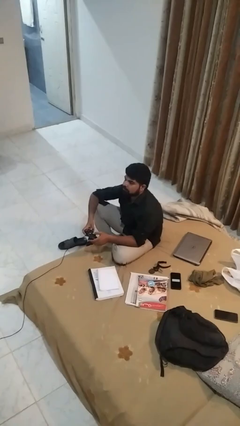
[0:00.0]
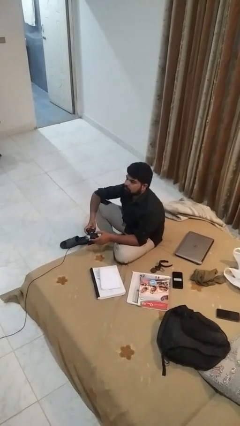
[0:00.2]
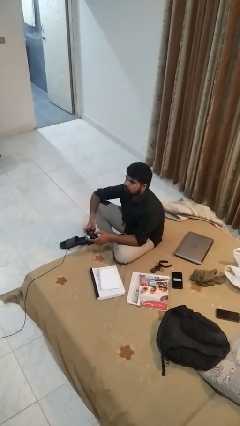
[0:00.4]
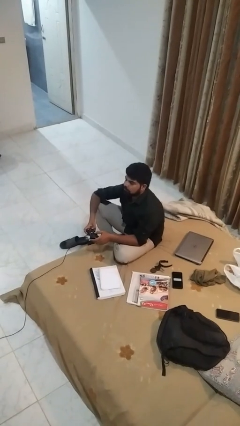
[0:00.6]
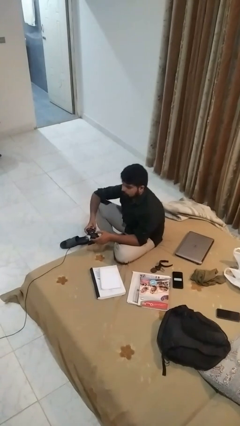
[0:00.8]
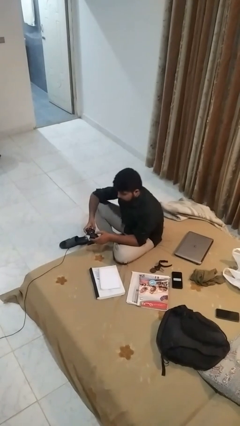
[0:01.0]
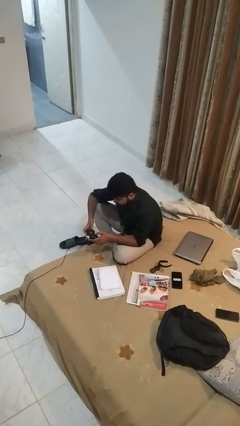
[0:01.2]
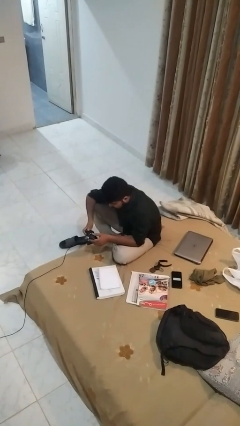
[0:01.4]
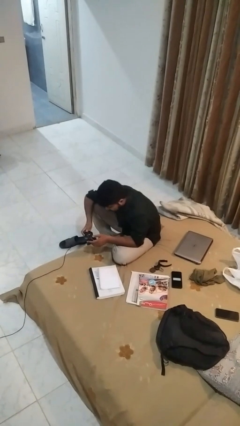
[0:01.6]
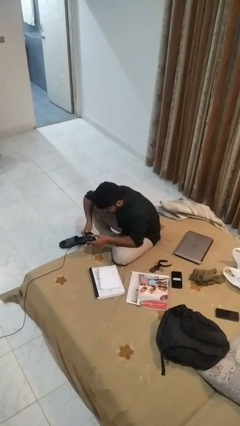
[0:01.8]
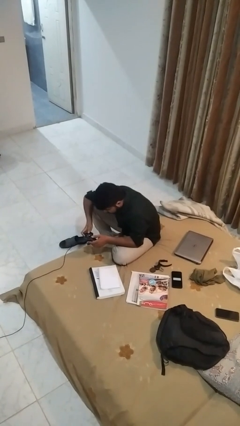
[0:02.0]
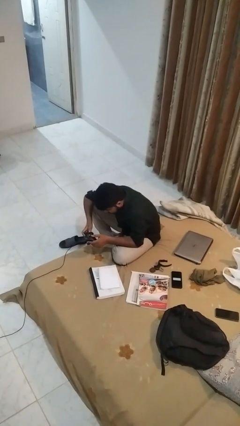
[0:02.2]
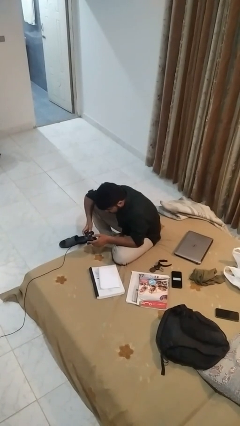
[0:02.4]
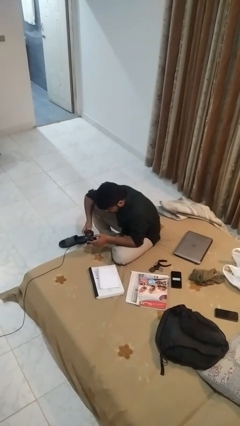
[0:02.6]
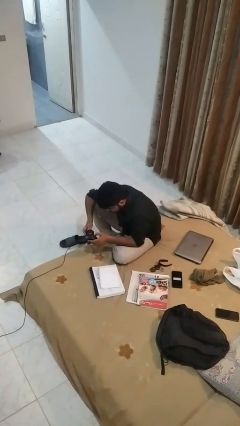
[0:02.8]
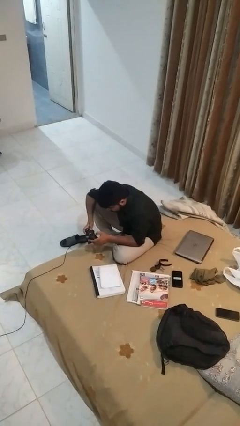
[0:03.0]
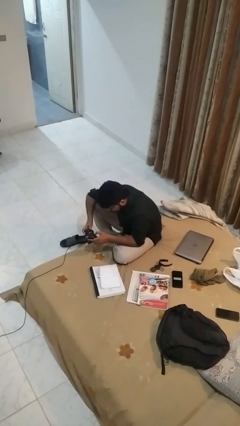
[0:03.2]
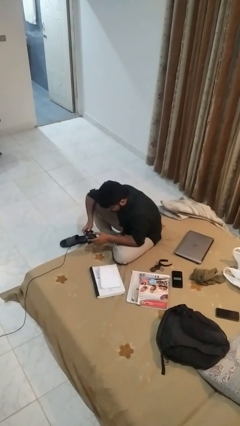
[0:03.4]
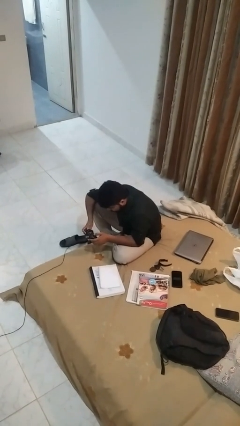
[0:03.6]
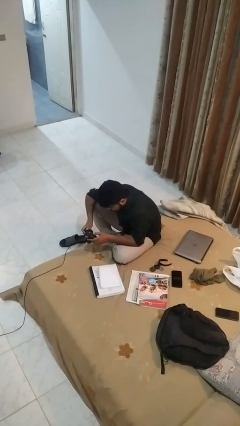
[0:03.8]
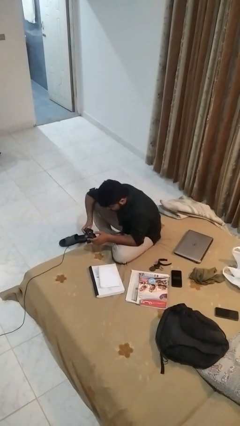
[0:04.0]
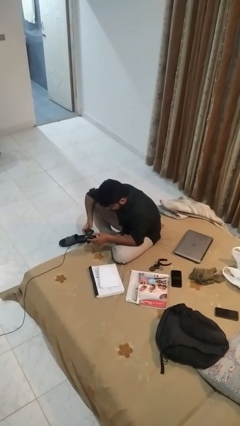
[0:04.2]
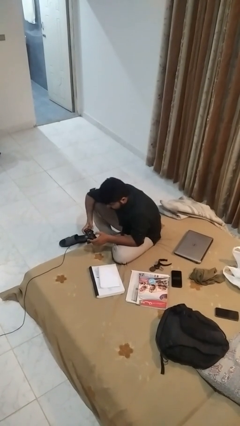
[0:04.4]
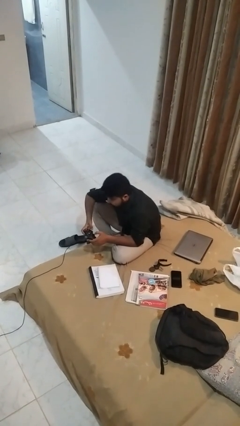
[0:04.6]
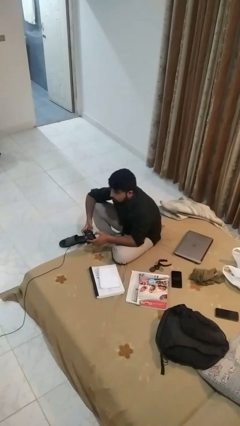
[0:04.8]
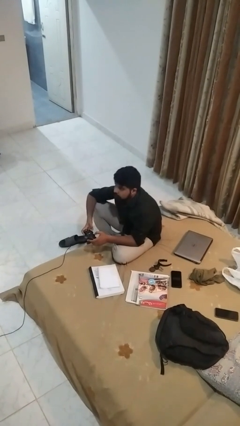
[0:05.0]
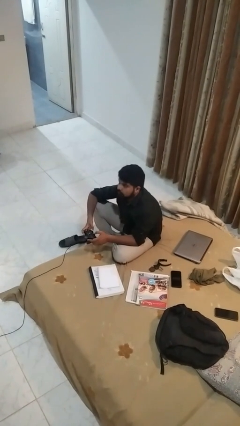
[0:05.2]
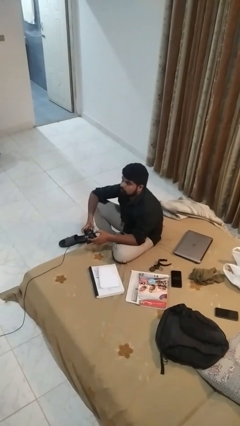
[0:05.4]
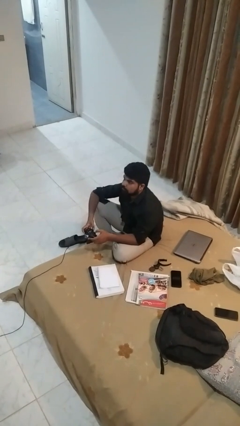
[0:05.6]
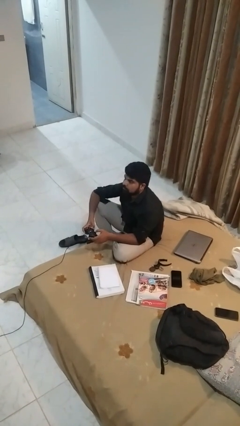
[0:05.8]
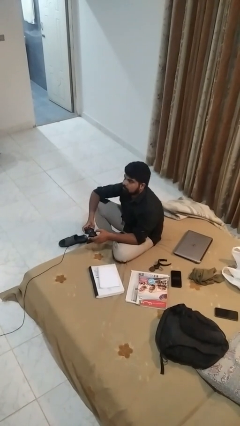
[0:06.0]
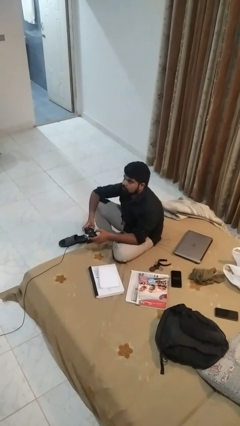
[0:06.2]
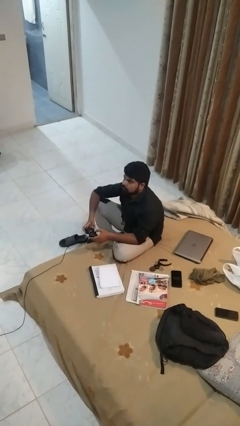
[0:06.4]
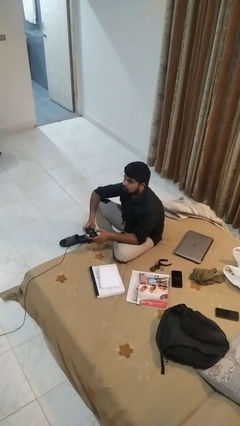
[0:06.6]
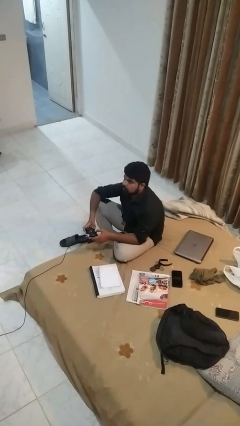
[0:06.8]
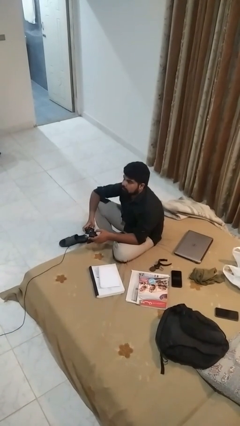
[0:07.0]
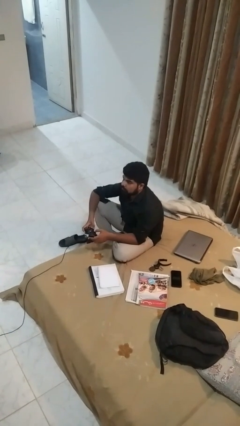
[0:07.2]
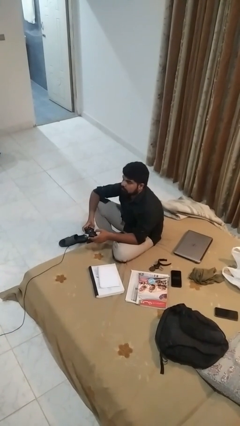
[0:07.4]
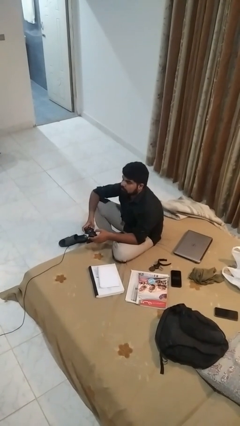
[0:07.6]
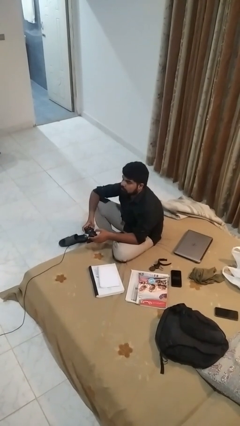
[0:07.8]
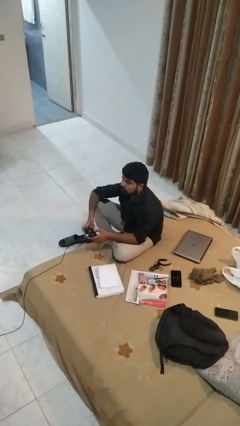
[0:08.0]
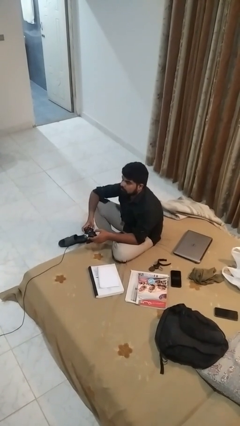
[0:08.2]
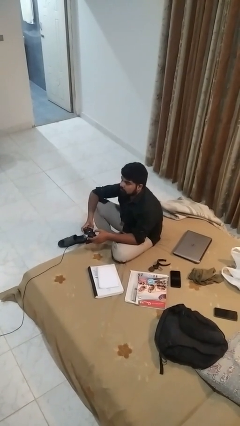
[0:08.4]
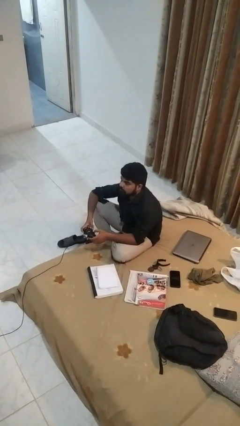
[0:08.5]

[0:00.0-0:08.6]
person interacts with handheld game

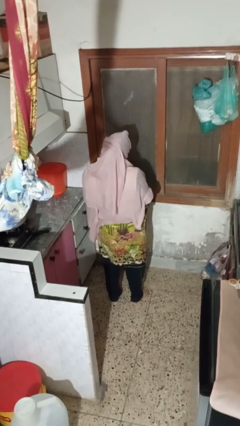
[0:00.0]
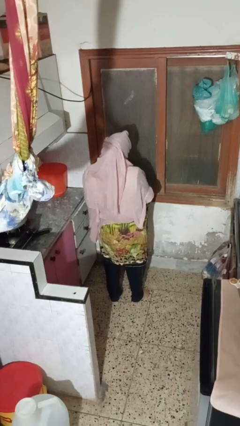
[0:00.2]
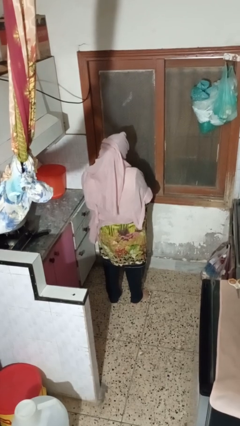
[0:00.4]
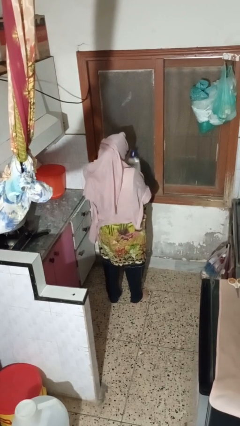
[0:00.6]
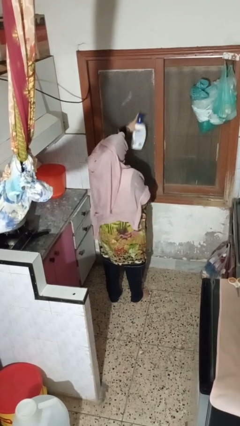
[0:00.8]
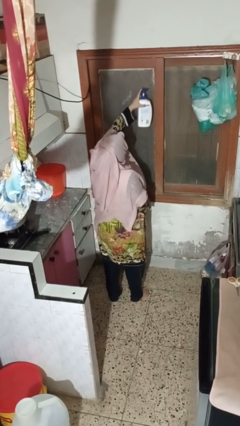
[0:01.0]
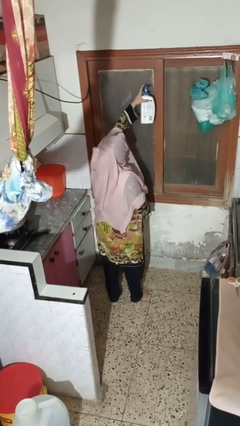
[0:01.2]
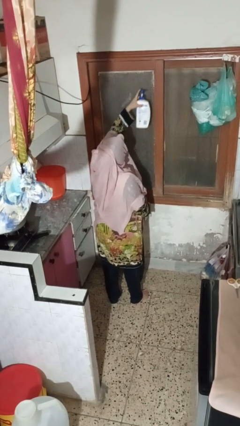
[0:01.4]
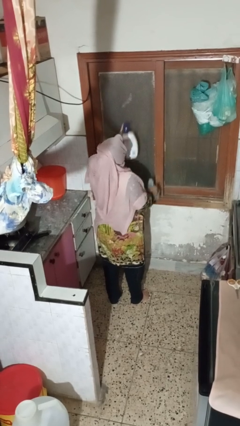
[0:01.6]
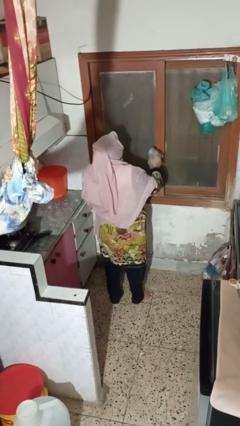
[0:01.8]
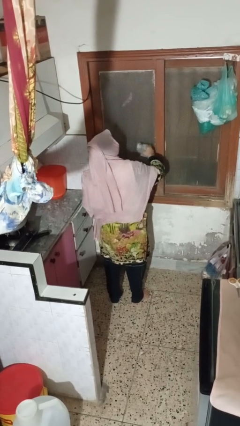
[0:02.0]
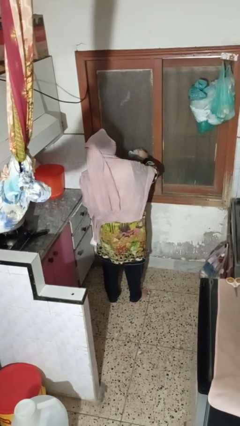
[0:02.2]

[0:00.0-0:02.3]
person sprays from bottle

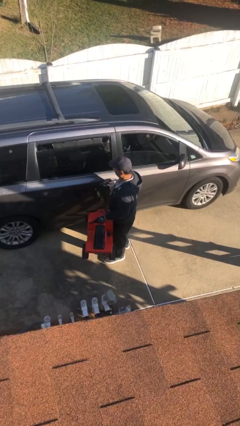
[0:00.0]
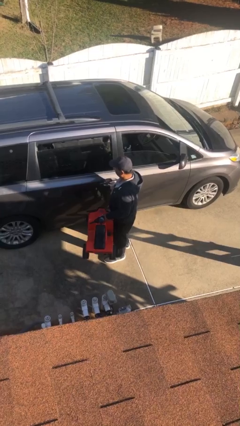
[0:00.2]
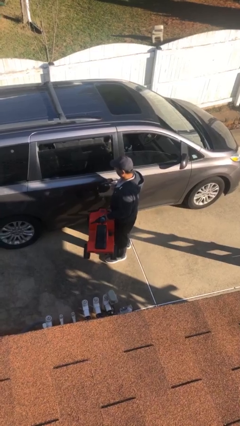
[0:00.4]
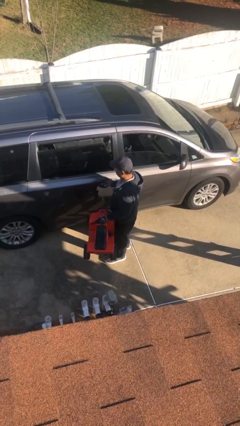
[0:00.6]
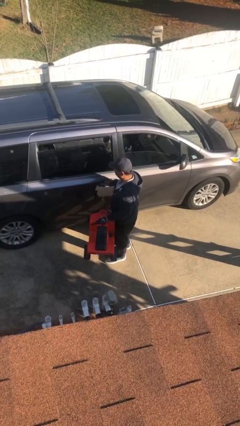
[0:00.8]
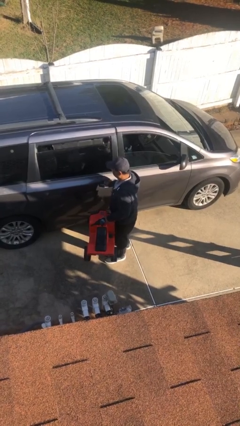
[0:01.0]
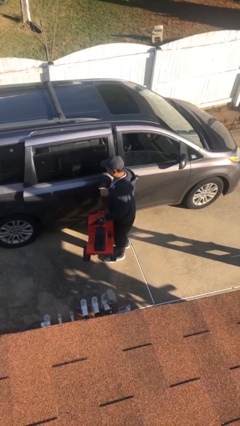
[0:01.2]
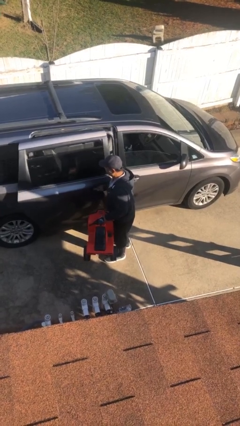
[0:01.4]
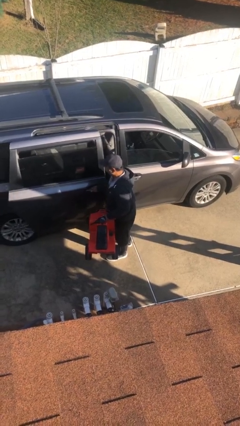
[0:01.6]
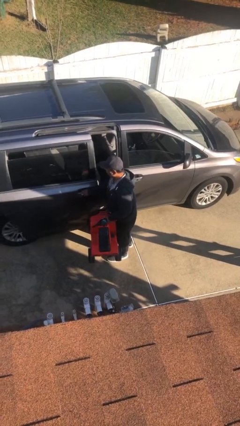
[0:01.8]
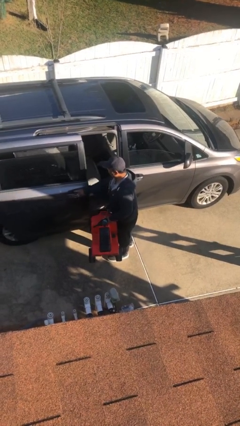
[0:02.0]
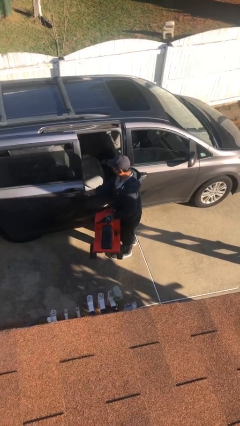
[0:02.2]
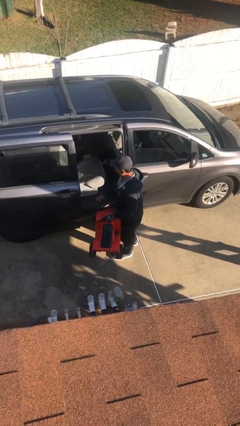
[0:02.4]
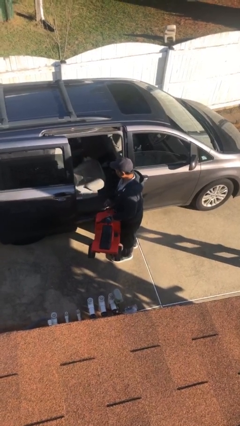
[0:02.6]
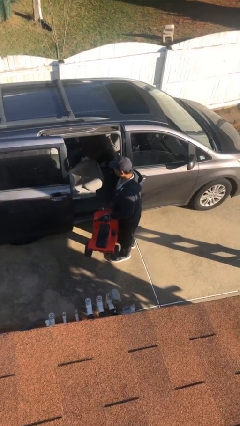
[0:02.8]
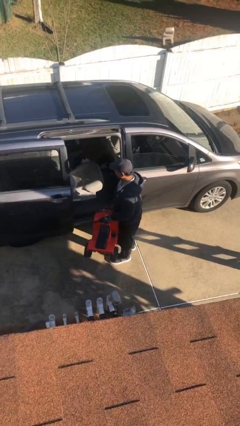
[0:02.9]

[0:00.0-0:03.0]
person opens car door

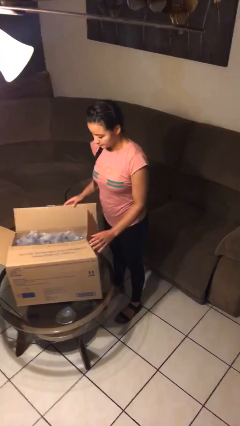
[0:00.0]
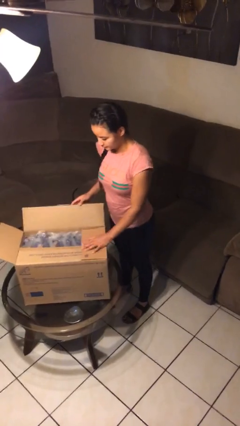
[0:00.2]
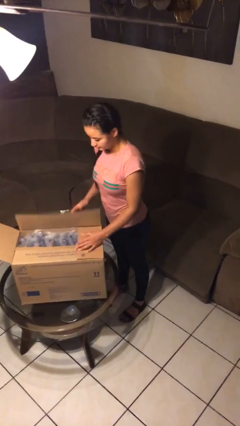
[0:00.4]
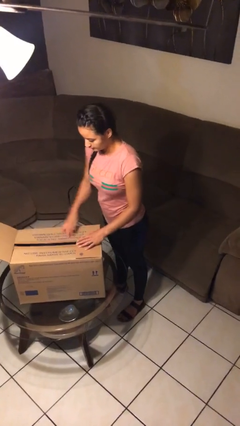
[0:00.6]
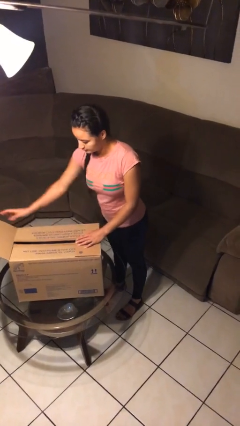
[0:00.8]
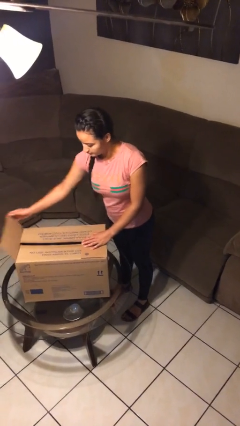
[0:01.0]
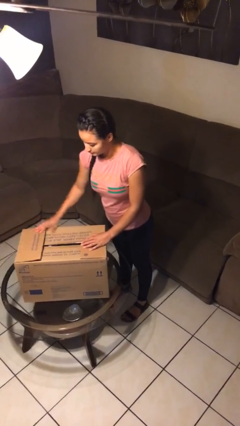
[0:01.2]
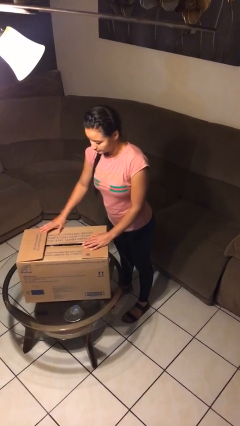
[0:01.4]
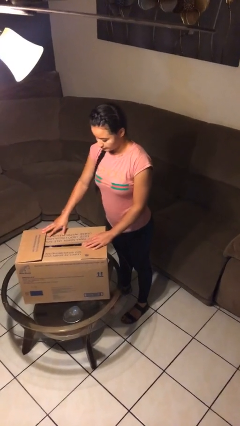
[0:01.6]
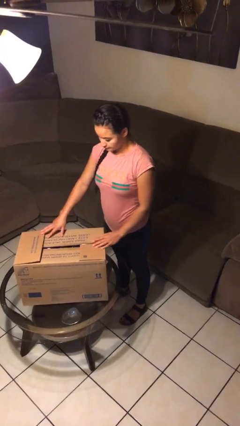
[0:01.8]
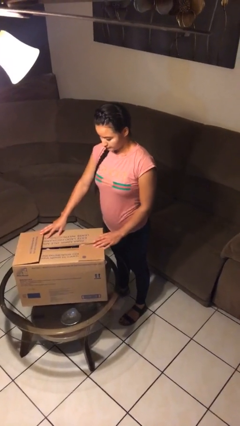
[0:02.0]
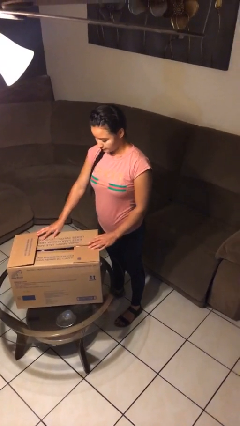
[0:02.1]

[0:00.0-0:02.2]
person closes box

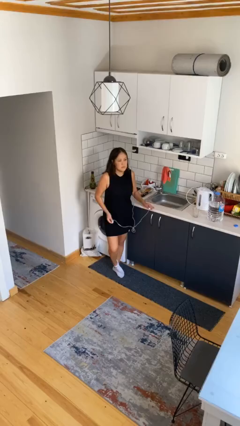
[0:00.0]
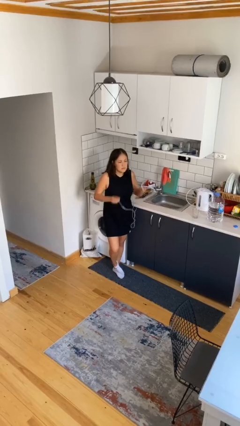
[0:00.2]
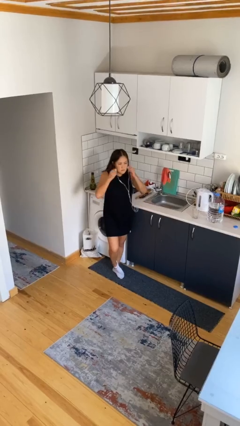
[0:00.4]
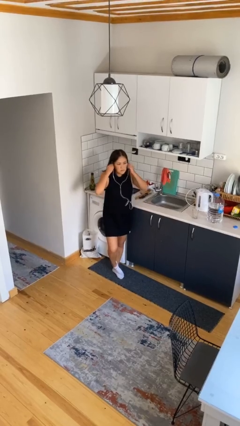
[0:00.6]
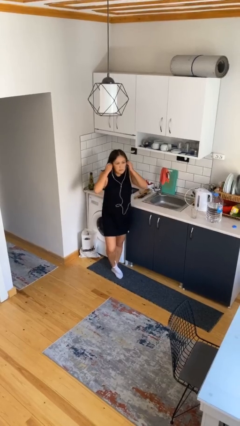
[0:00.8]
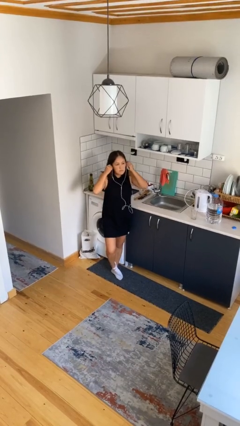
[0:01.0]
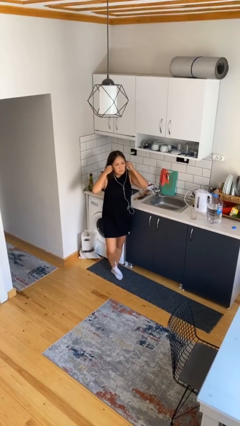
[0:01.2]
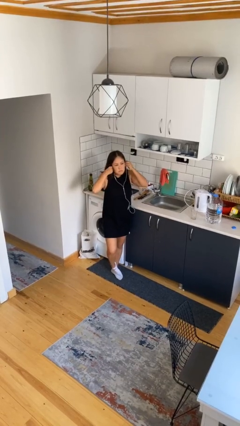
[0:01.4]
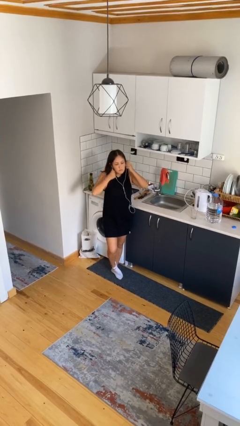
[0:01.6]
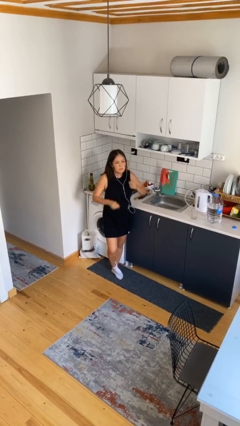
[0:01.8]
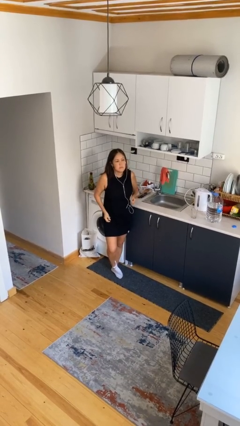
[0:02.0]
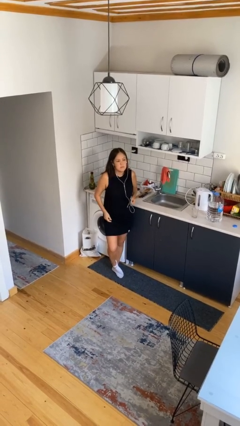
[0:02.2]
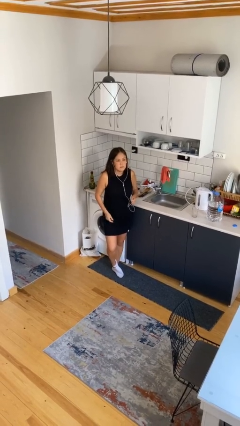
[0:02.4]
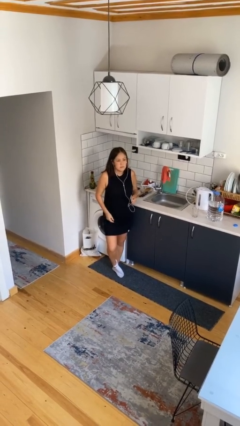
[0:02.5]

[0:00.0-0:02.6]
person puts on headphones
